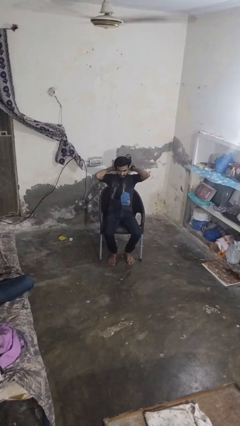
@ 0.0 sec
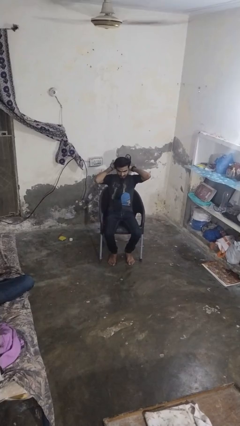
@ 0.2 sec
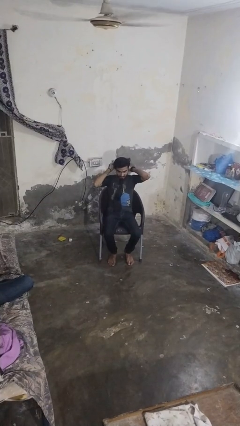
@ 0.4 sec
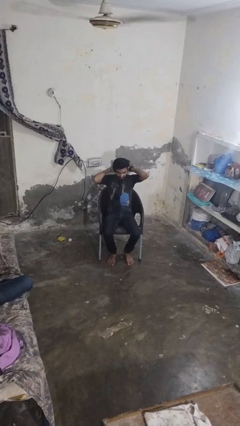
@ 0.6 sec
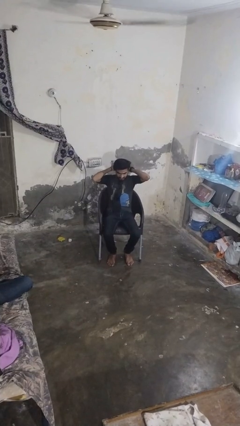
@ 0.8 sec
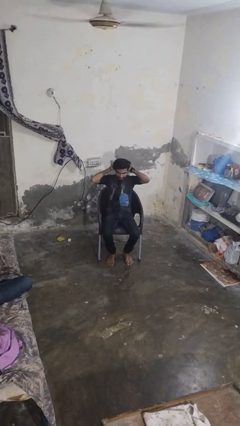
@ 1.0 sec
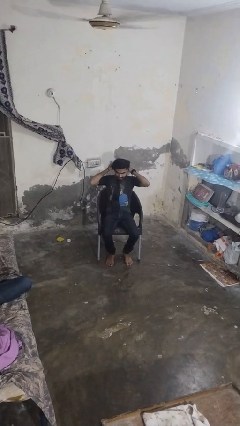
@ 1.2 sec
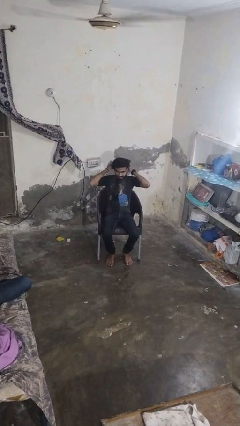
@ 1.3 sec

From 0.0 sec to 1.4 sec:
person takes off necktie

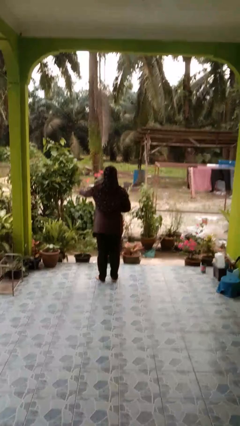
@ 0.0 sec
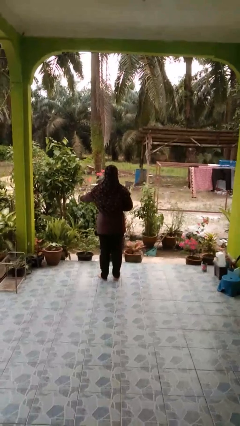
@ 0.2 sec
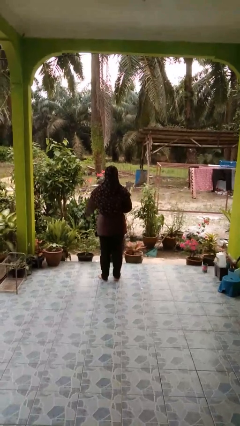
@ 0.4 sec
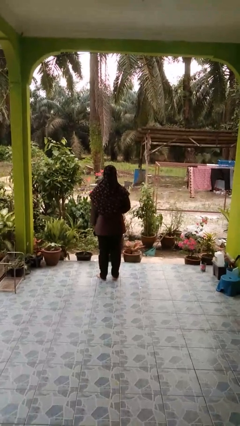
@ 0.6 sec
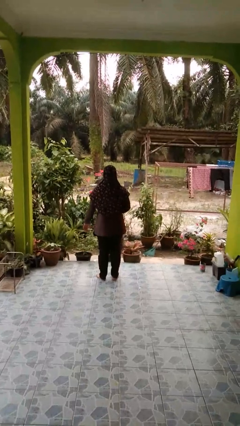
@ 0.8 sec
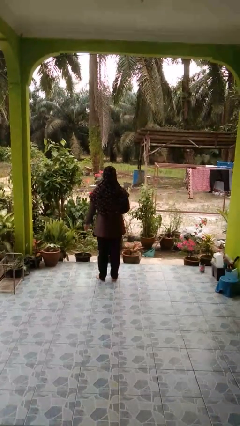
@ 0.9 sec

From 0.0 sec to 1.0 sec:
person karate chop

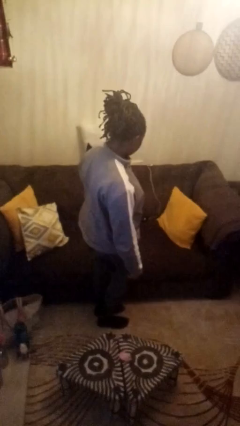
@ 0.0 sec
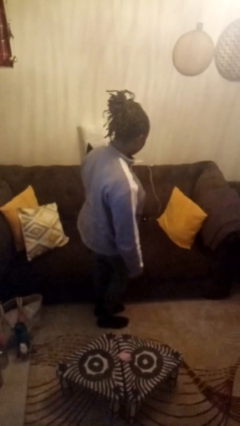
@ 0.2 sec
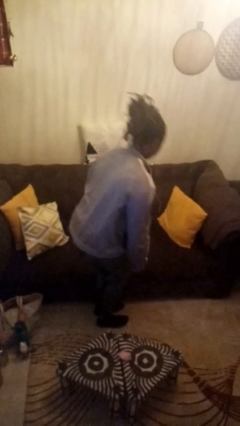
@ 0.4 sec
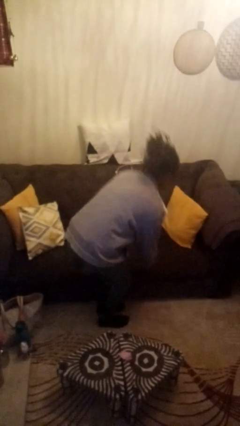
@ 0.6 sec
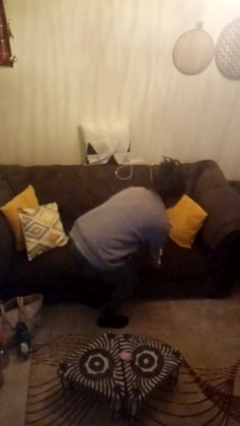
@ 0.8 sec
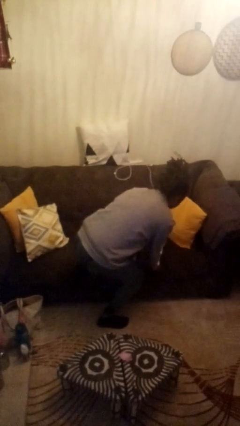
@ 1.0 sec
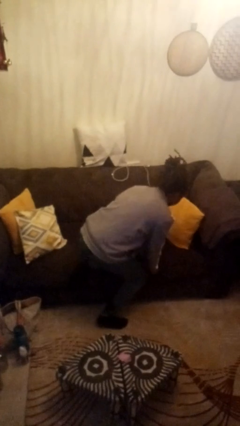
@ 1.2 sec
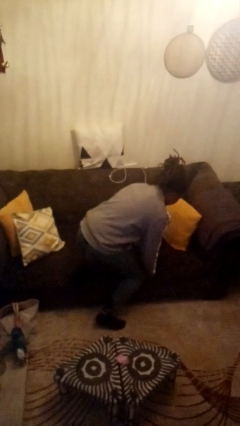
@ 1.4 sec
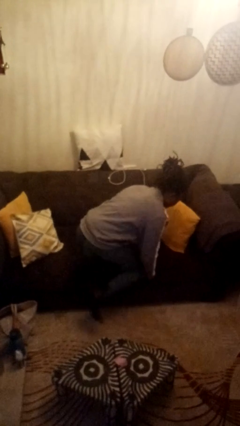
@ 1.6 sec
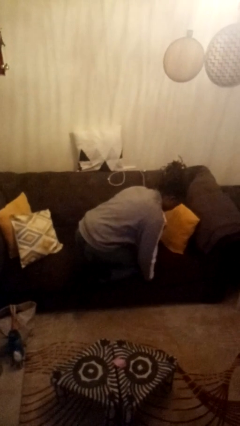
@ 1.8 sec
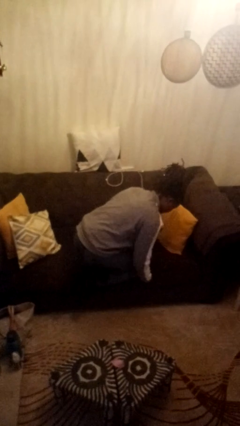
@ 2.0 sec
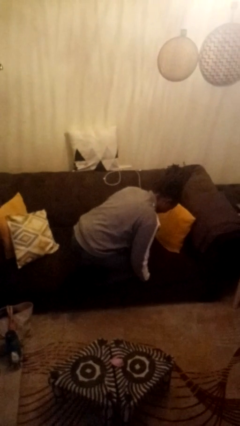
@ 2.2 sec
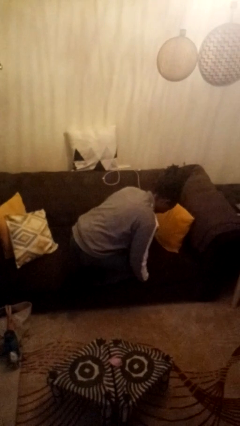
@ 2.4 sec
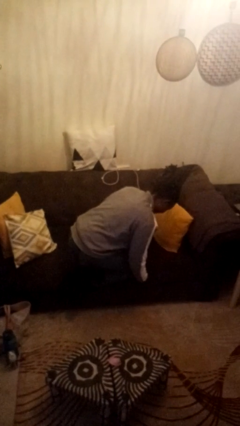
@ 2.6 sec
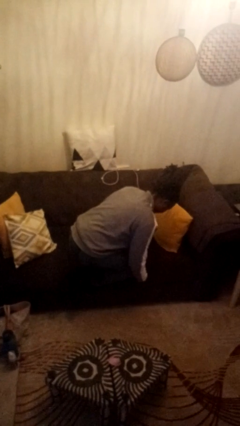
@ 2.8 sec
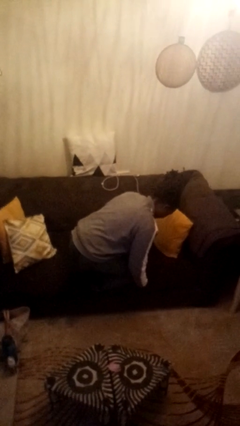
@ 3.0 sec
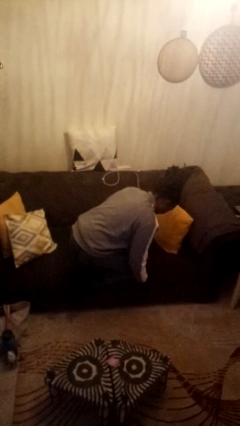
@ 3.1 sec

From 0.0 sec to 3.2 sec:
person climbs on chair

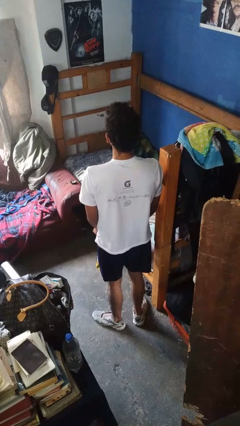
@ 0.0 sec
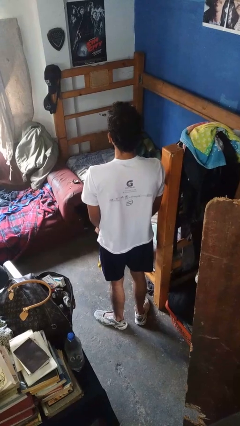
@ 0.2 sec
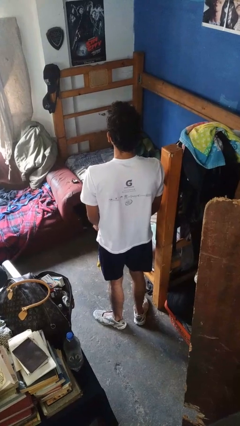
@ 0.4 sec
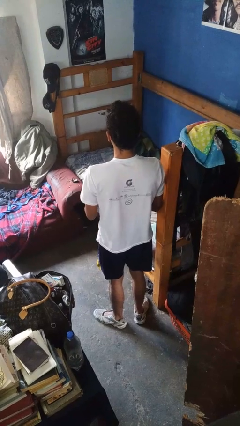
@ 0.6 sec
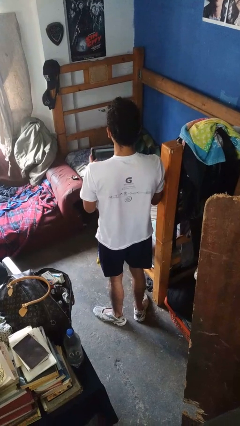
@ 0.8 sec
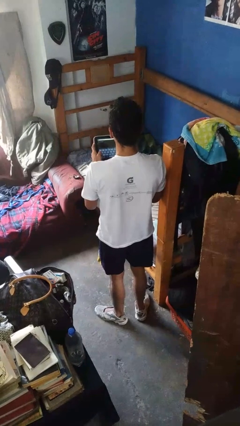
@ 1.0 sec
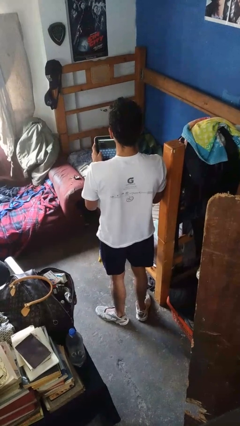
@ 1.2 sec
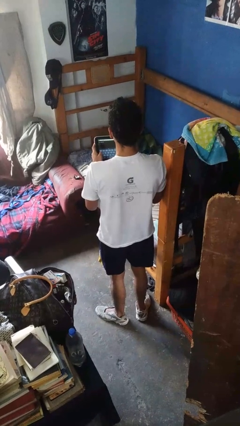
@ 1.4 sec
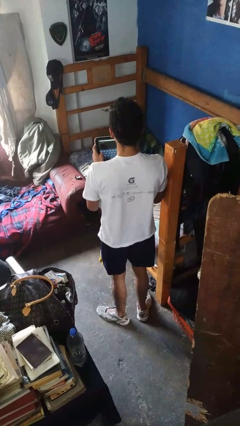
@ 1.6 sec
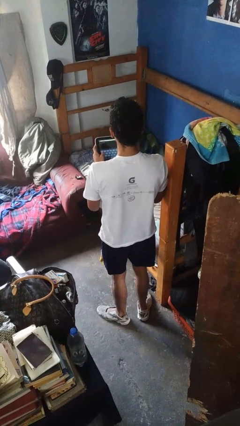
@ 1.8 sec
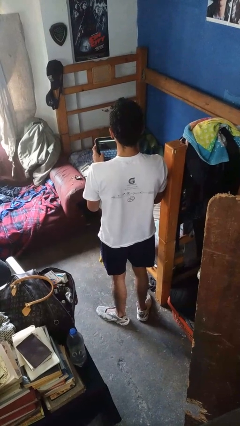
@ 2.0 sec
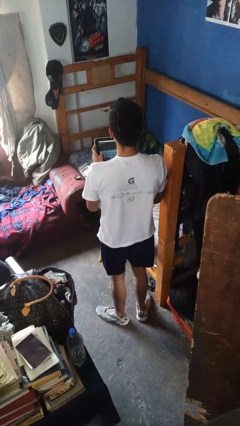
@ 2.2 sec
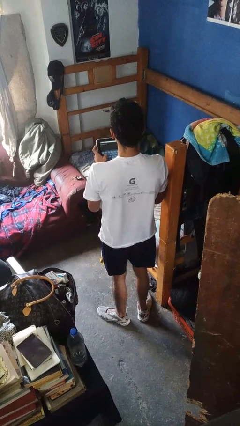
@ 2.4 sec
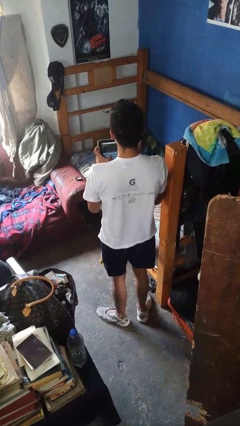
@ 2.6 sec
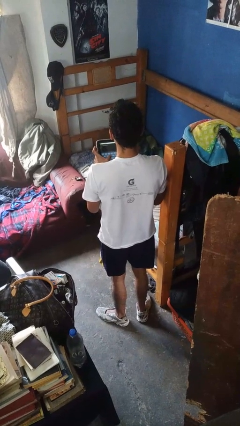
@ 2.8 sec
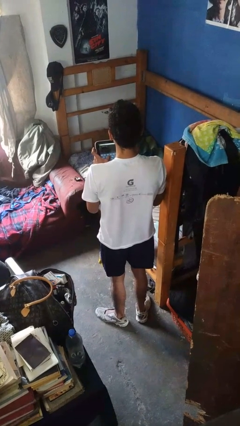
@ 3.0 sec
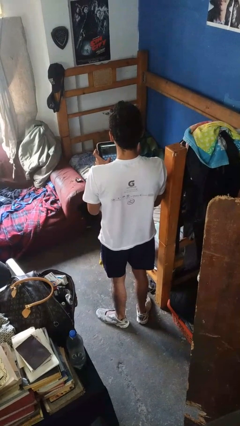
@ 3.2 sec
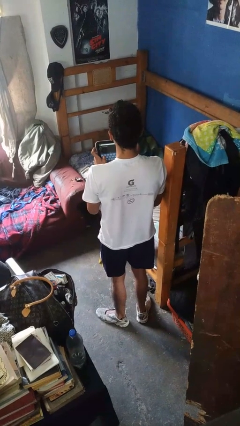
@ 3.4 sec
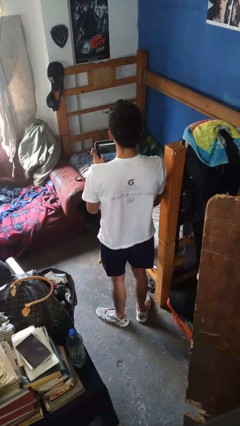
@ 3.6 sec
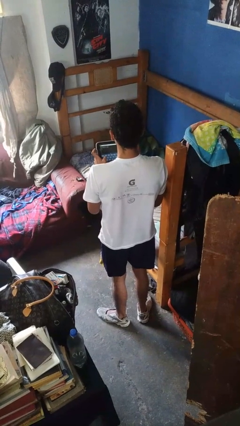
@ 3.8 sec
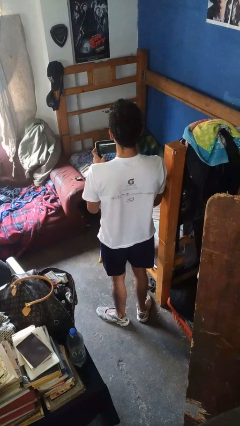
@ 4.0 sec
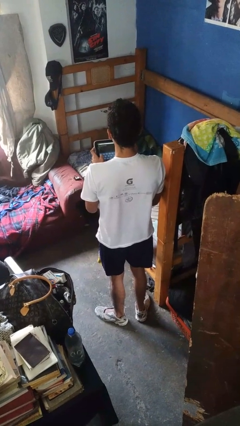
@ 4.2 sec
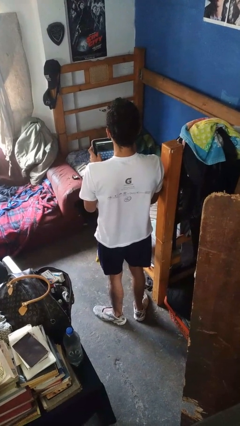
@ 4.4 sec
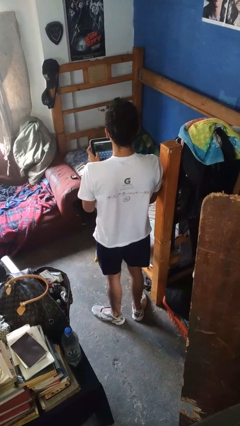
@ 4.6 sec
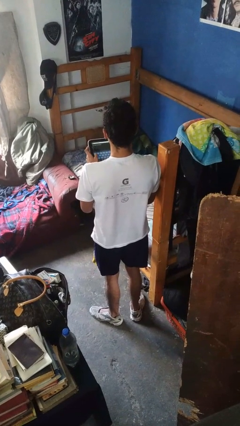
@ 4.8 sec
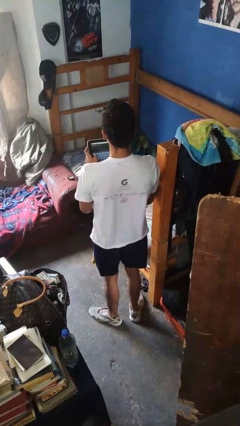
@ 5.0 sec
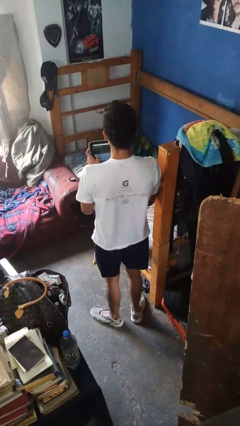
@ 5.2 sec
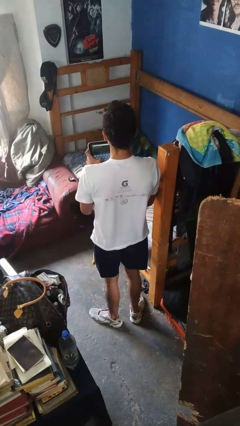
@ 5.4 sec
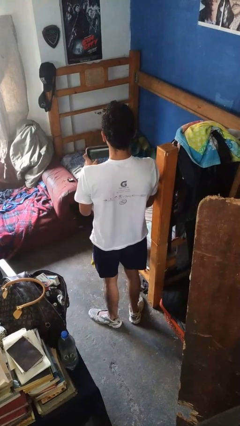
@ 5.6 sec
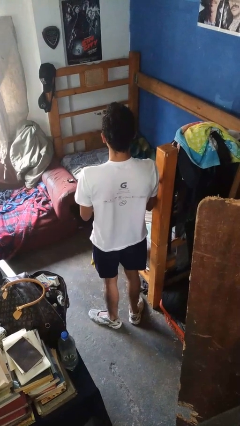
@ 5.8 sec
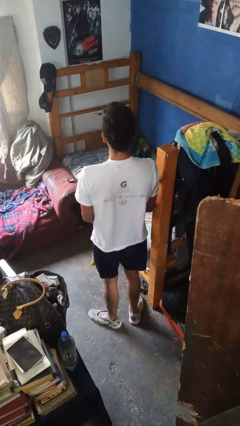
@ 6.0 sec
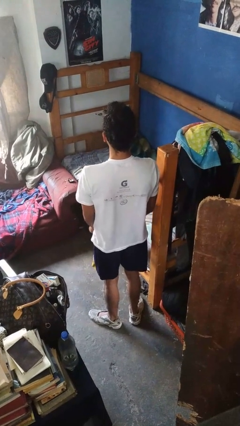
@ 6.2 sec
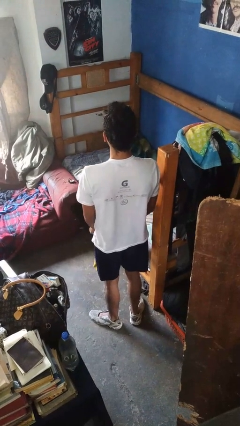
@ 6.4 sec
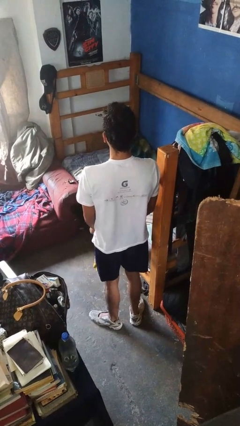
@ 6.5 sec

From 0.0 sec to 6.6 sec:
person interacts with tablet

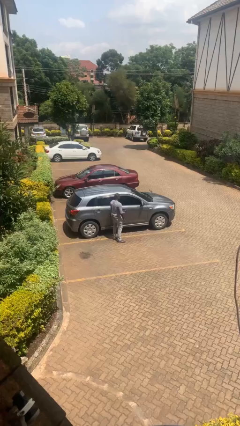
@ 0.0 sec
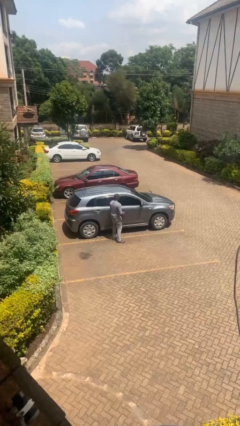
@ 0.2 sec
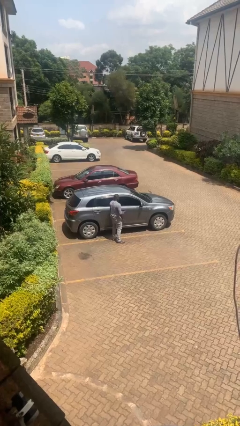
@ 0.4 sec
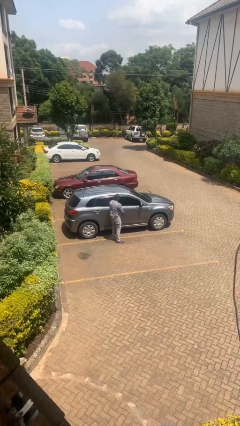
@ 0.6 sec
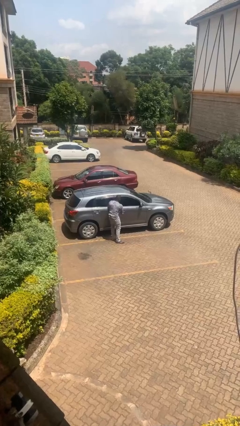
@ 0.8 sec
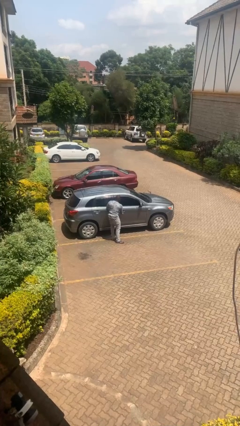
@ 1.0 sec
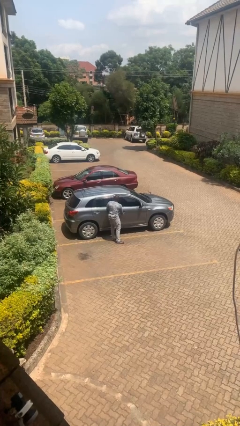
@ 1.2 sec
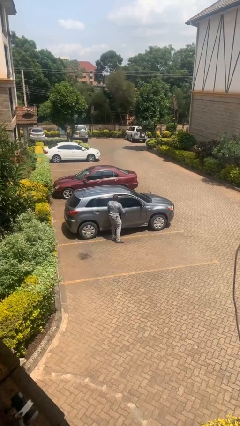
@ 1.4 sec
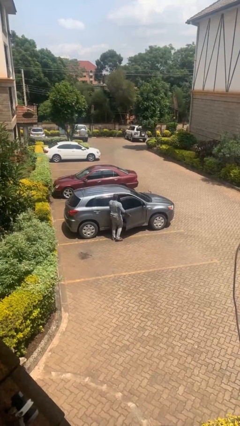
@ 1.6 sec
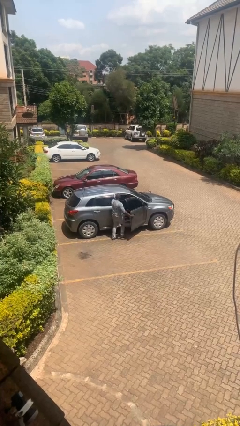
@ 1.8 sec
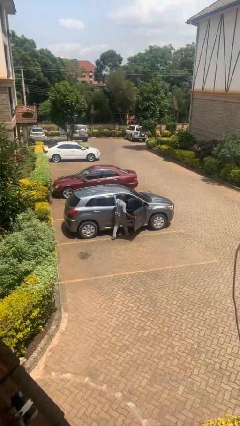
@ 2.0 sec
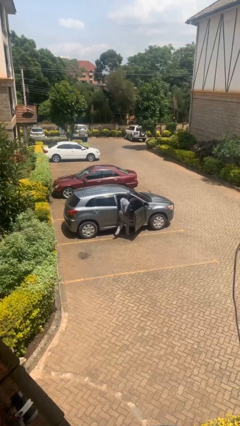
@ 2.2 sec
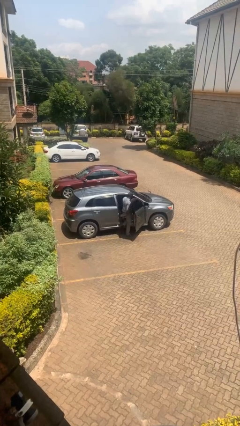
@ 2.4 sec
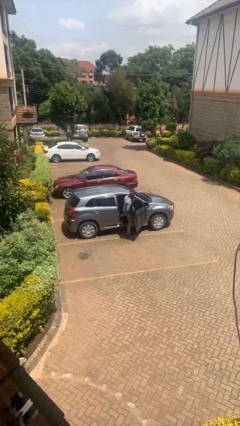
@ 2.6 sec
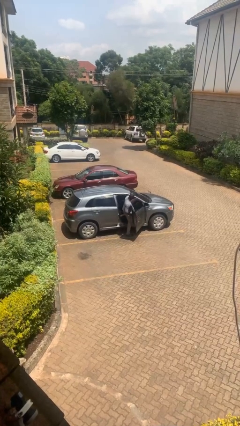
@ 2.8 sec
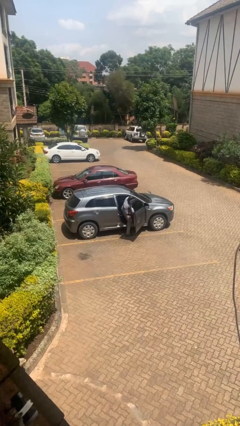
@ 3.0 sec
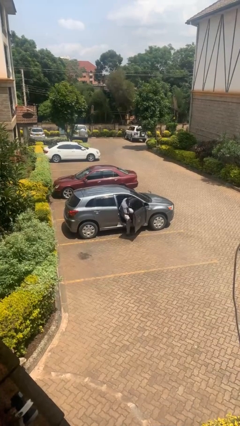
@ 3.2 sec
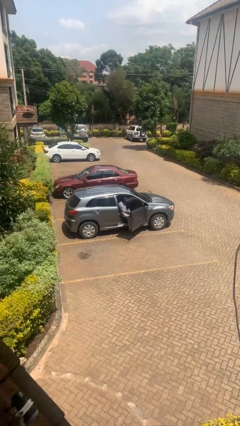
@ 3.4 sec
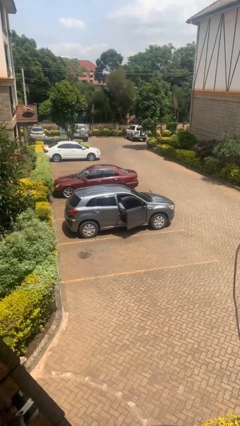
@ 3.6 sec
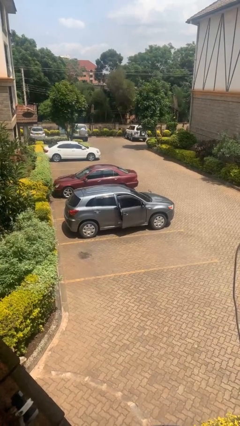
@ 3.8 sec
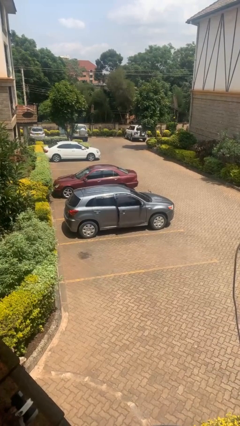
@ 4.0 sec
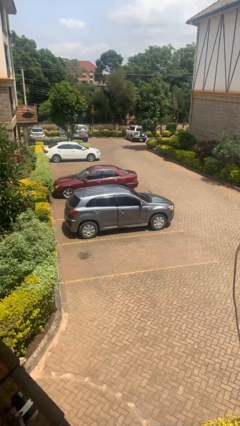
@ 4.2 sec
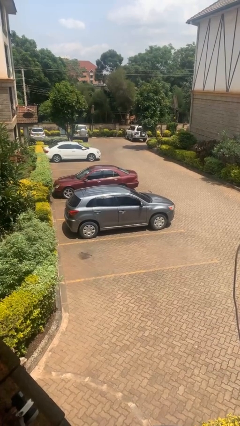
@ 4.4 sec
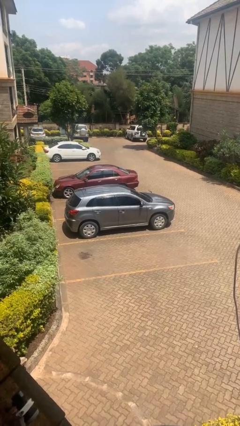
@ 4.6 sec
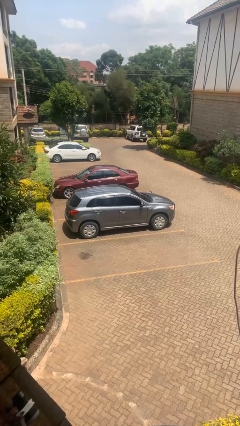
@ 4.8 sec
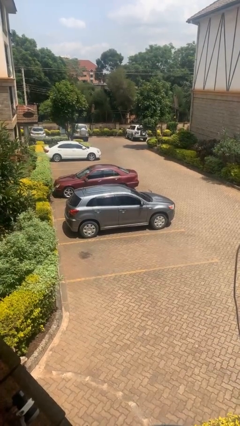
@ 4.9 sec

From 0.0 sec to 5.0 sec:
car picks up person
